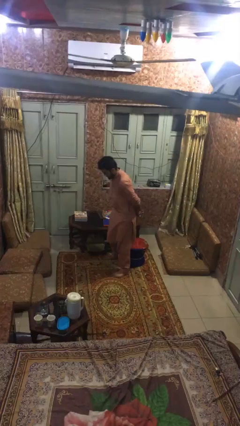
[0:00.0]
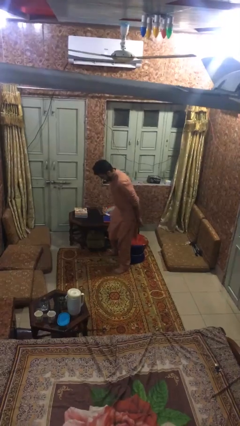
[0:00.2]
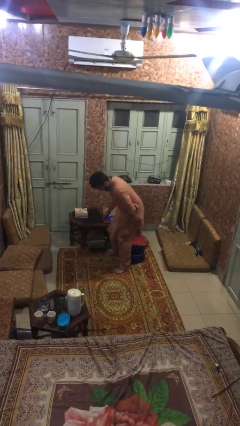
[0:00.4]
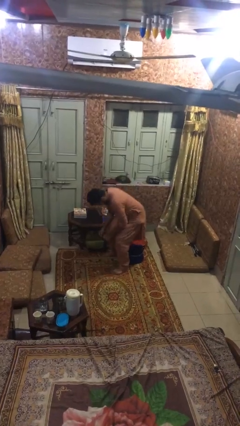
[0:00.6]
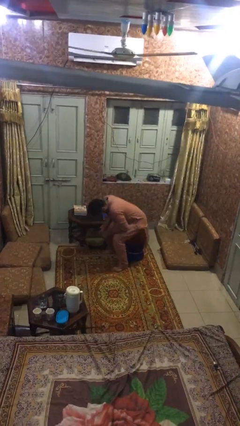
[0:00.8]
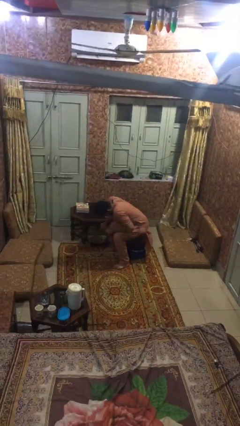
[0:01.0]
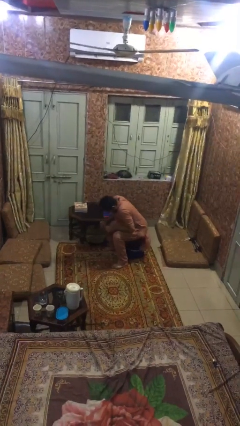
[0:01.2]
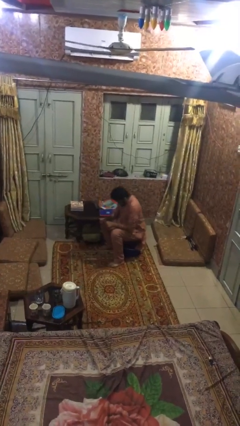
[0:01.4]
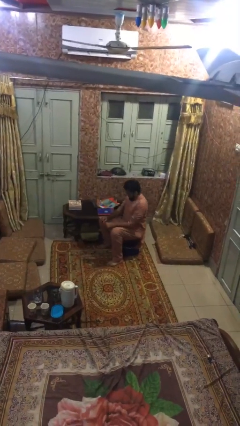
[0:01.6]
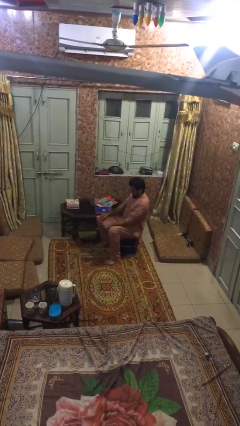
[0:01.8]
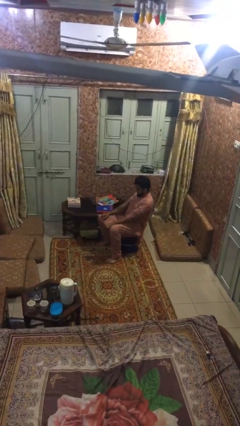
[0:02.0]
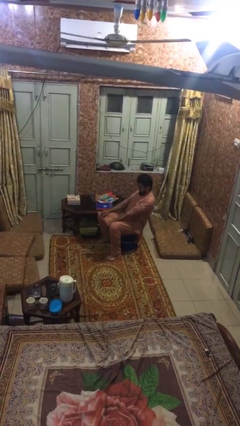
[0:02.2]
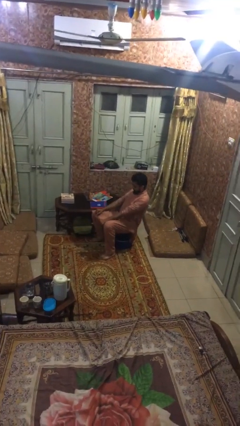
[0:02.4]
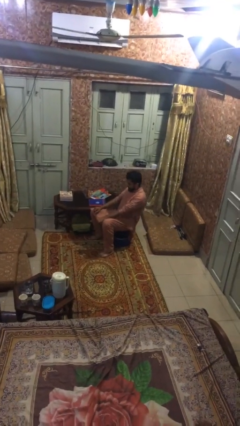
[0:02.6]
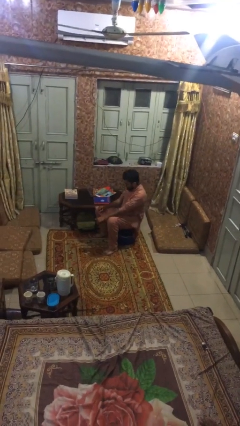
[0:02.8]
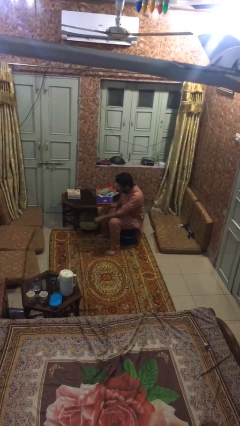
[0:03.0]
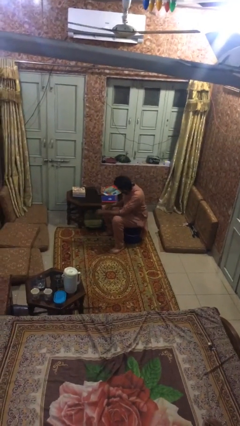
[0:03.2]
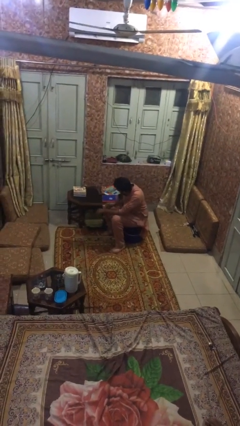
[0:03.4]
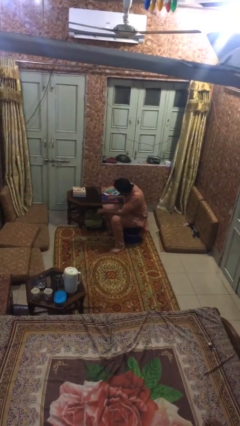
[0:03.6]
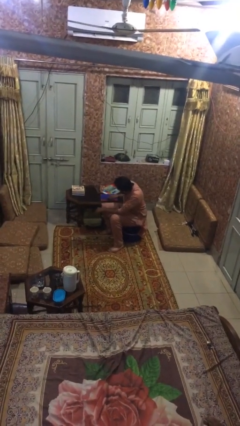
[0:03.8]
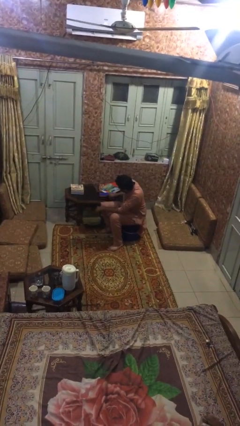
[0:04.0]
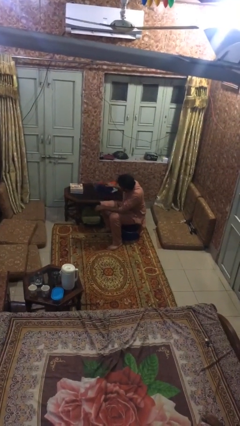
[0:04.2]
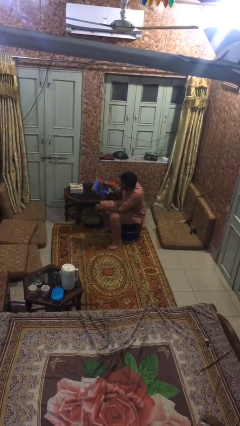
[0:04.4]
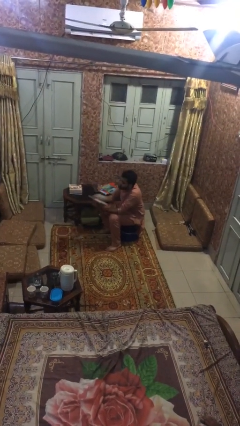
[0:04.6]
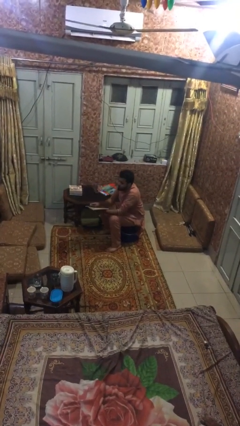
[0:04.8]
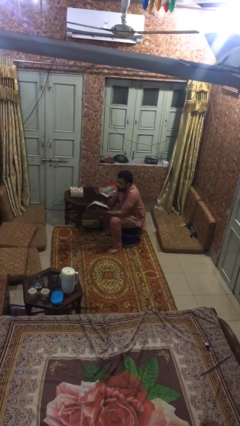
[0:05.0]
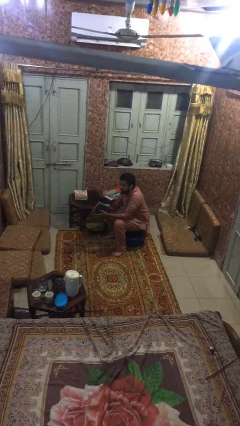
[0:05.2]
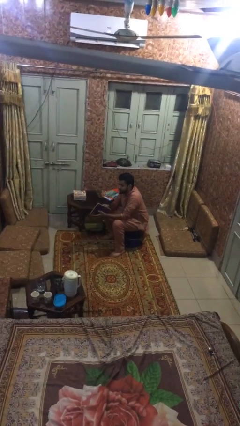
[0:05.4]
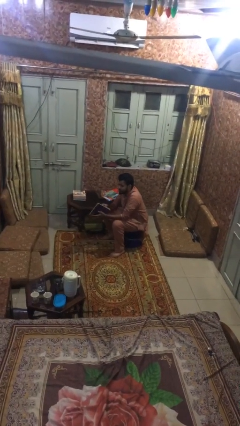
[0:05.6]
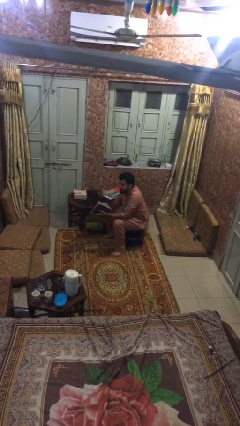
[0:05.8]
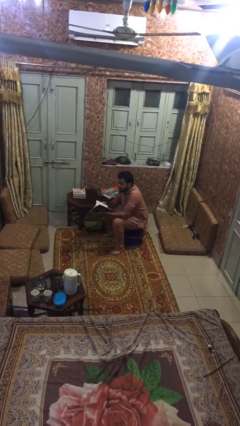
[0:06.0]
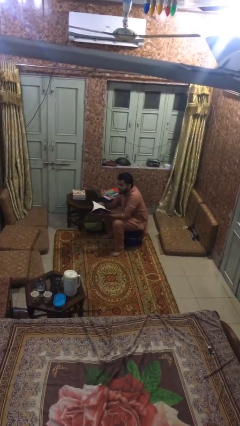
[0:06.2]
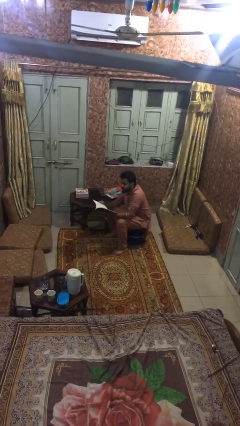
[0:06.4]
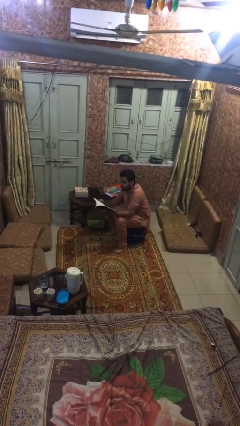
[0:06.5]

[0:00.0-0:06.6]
person sits down

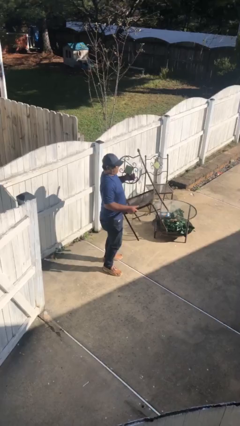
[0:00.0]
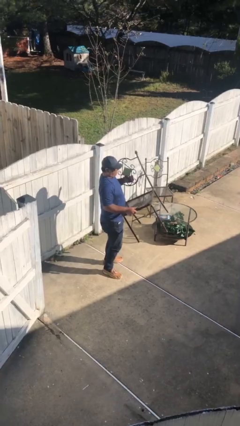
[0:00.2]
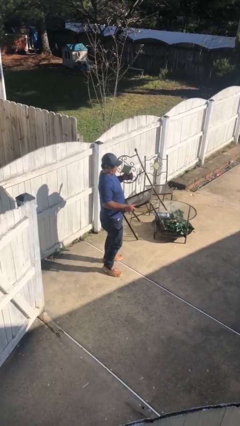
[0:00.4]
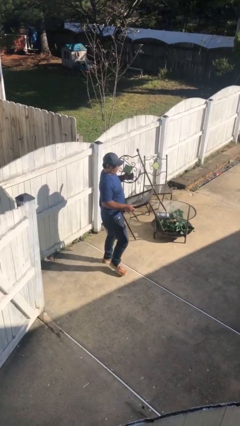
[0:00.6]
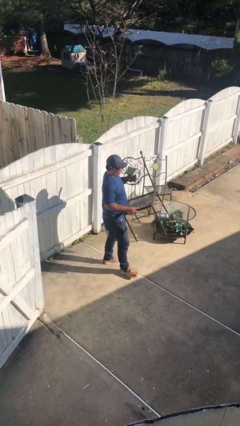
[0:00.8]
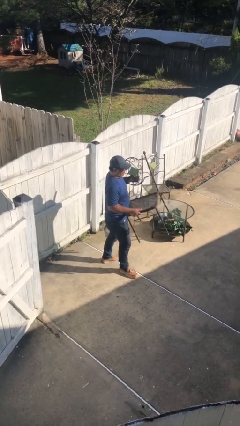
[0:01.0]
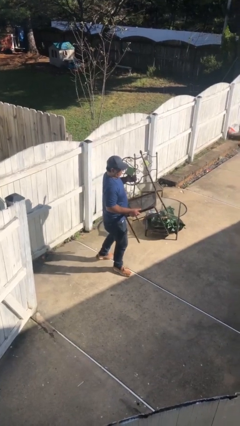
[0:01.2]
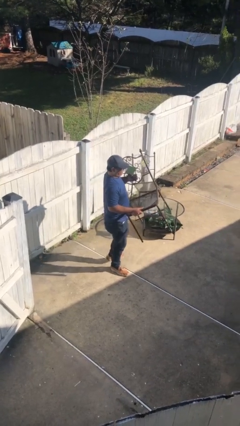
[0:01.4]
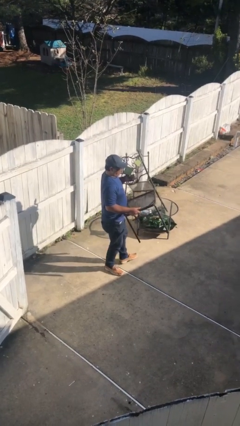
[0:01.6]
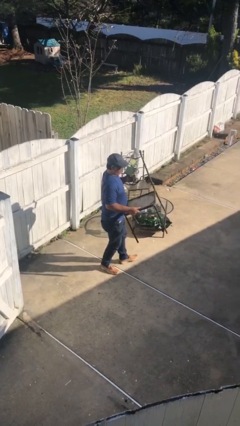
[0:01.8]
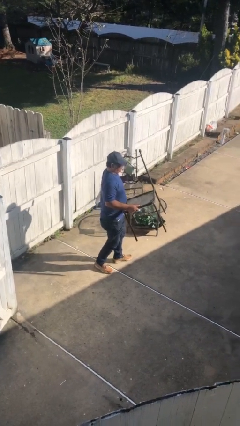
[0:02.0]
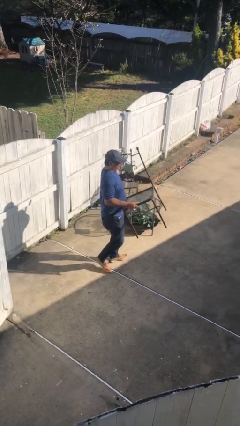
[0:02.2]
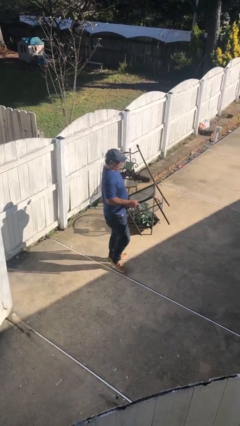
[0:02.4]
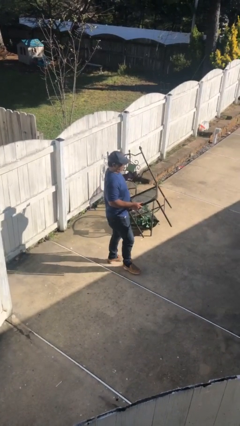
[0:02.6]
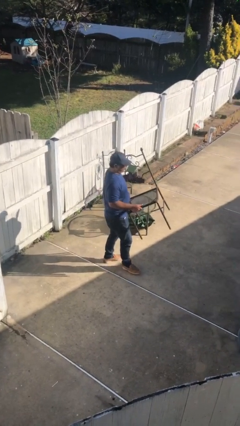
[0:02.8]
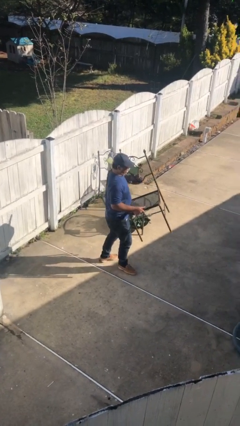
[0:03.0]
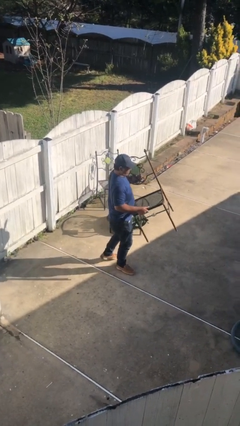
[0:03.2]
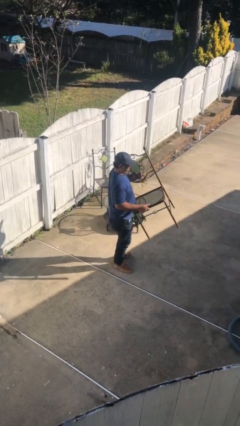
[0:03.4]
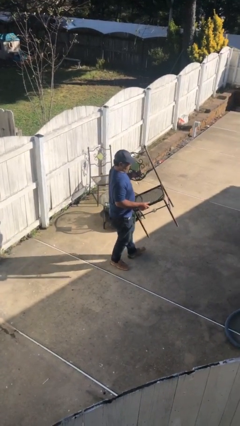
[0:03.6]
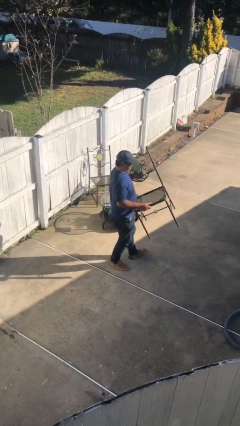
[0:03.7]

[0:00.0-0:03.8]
person carries heavy object

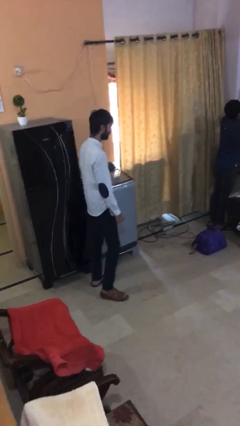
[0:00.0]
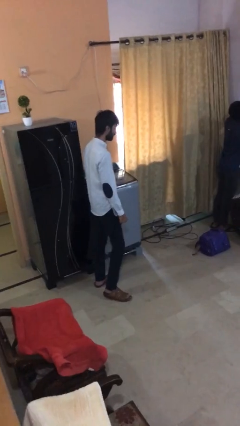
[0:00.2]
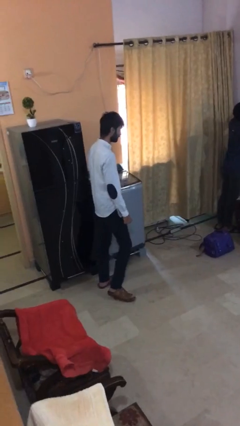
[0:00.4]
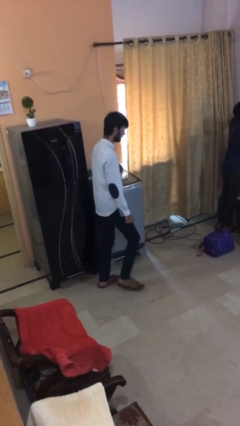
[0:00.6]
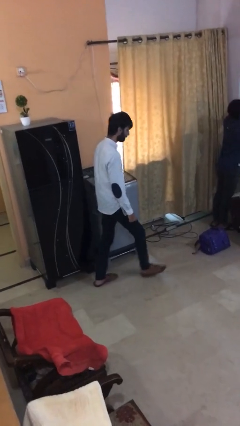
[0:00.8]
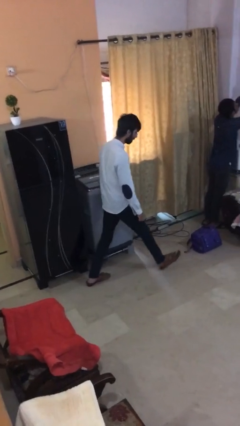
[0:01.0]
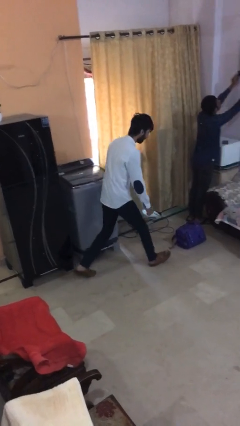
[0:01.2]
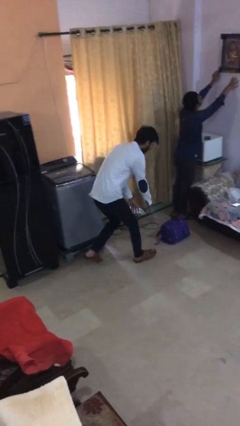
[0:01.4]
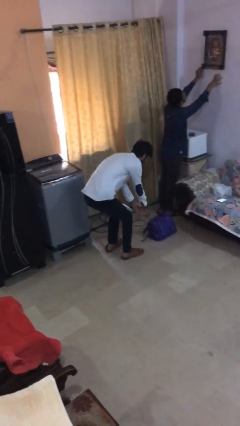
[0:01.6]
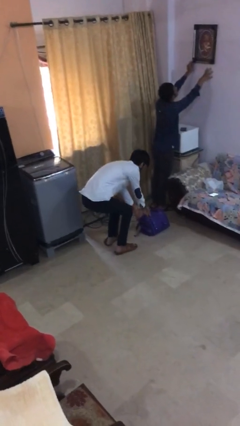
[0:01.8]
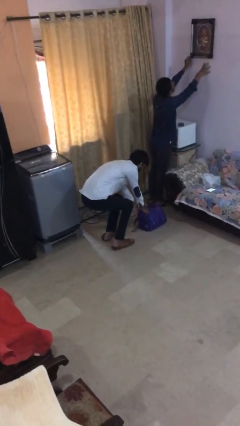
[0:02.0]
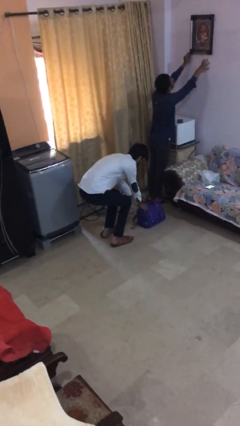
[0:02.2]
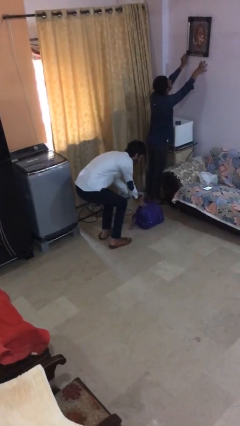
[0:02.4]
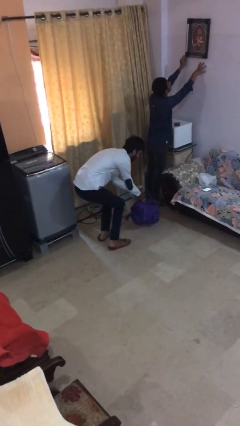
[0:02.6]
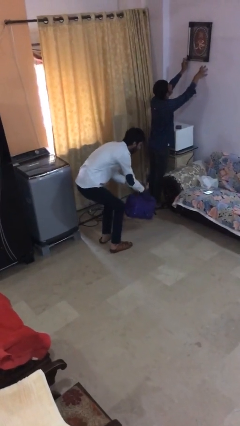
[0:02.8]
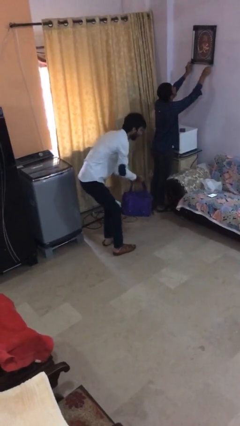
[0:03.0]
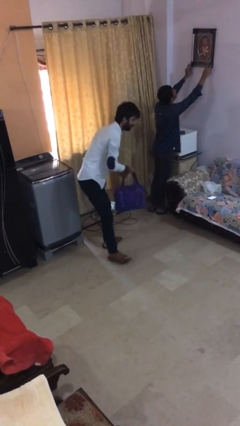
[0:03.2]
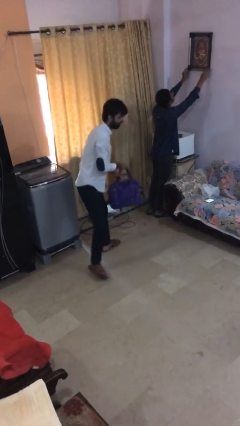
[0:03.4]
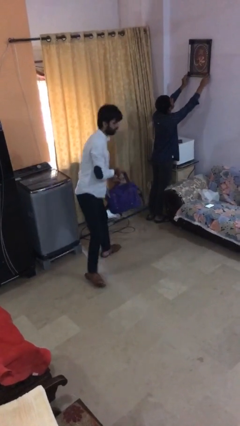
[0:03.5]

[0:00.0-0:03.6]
person steals object from person

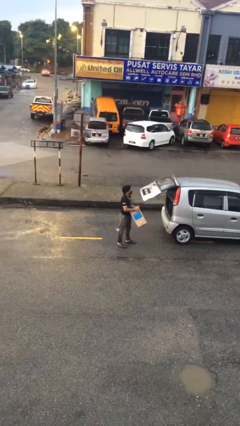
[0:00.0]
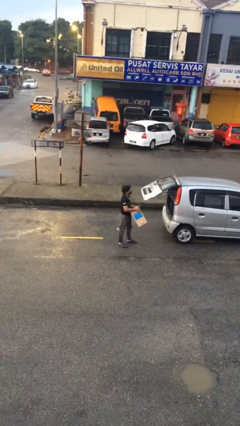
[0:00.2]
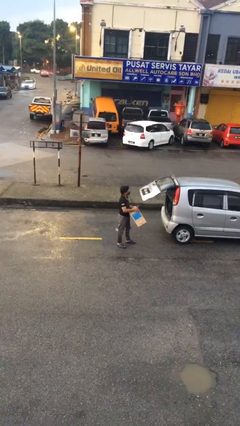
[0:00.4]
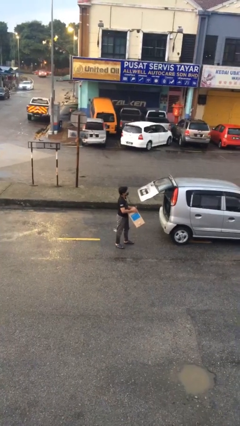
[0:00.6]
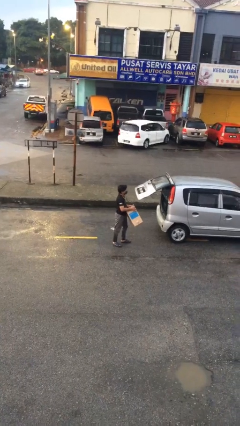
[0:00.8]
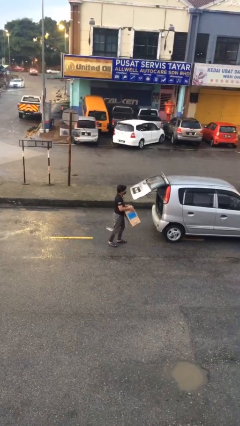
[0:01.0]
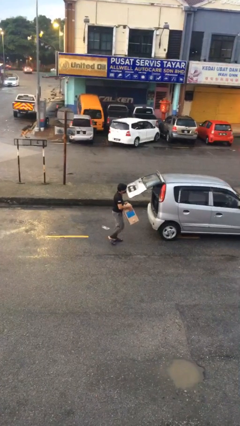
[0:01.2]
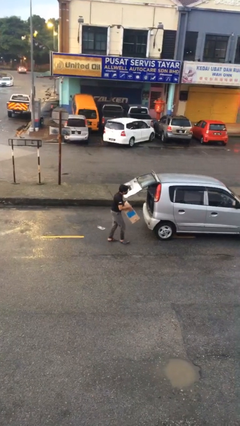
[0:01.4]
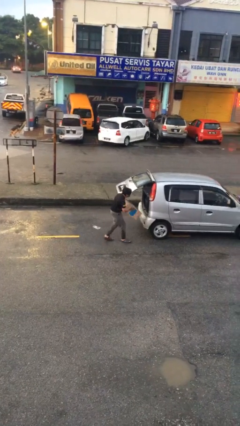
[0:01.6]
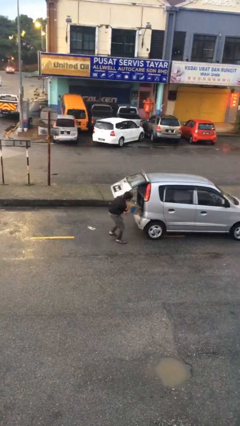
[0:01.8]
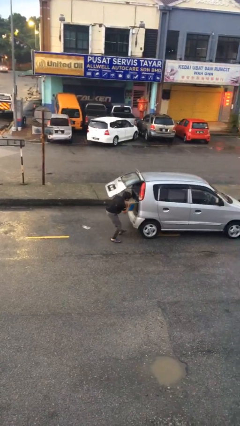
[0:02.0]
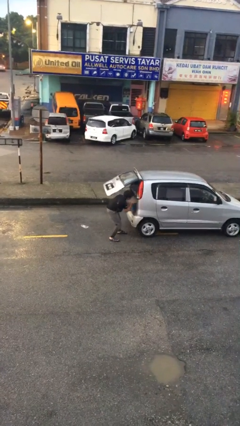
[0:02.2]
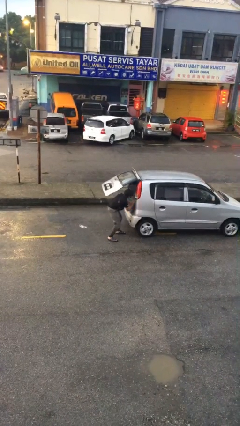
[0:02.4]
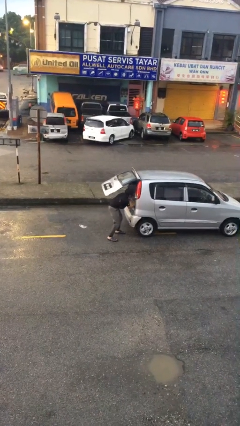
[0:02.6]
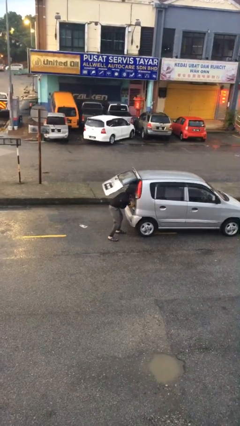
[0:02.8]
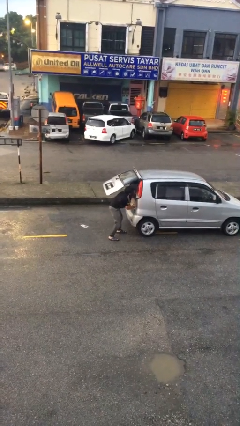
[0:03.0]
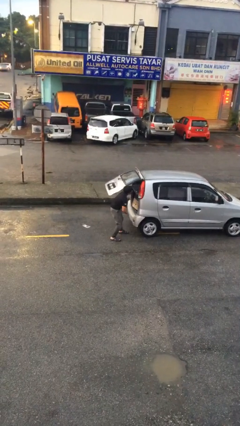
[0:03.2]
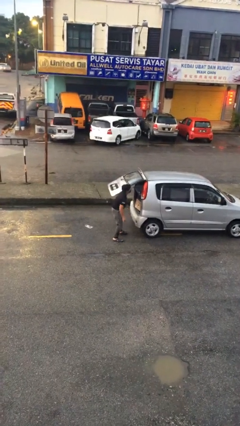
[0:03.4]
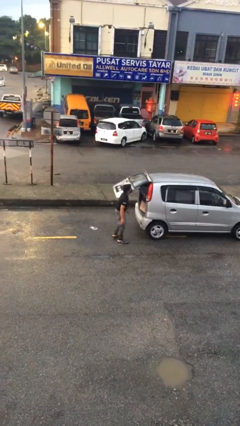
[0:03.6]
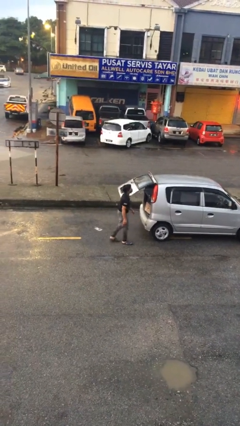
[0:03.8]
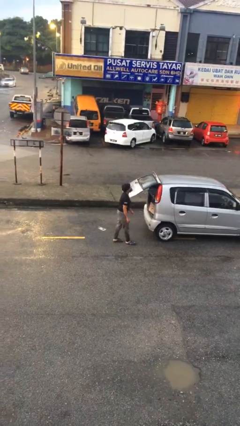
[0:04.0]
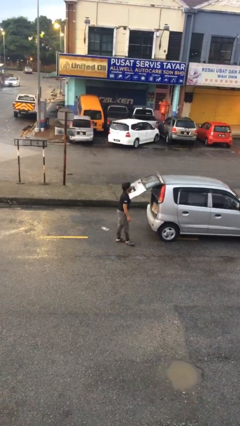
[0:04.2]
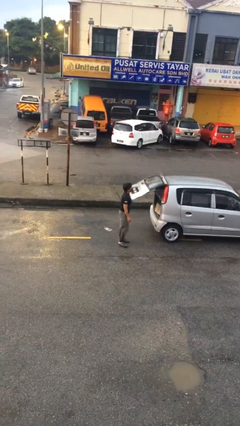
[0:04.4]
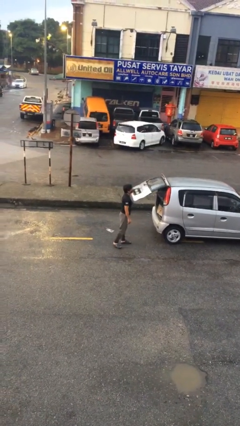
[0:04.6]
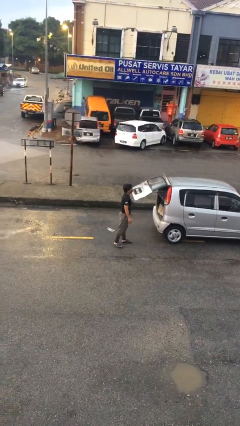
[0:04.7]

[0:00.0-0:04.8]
person loads car
